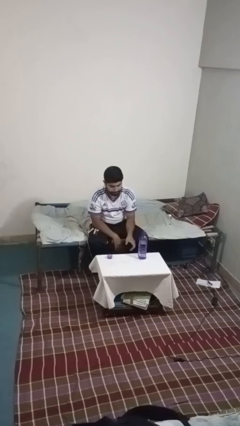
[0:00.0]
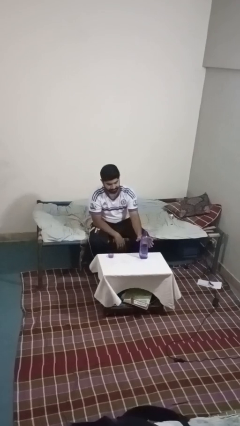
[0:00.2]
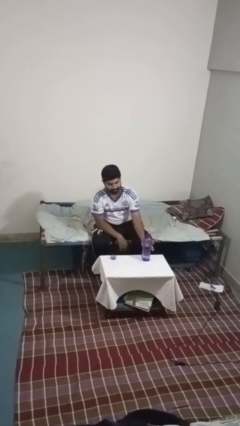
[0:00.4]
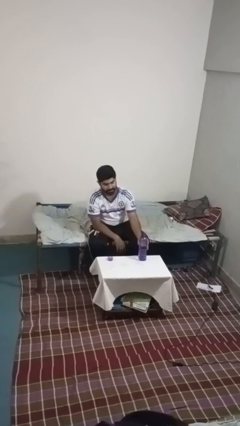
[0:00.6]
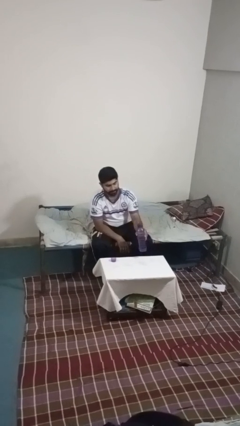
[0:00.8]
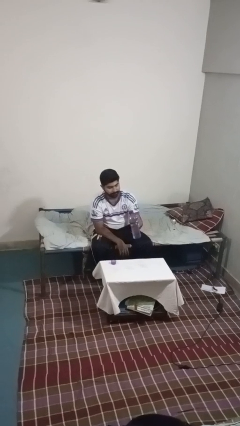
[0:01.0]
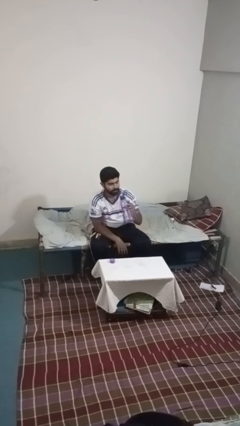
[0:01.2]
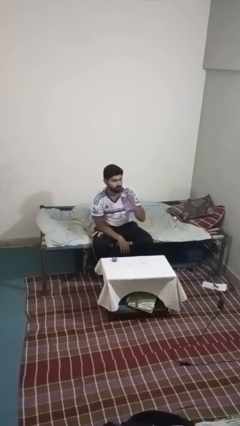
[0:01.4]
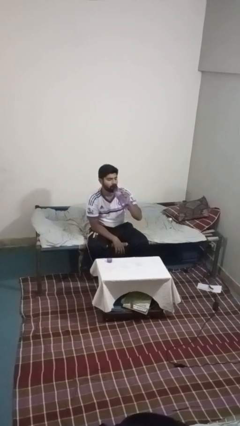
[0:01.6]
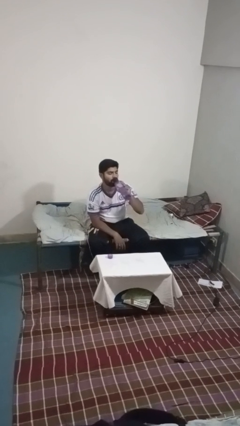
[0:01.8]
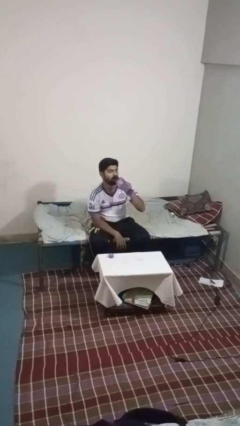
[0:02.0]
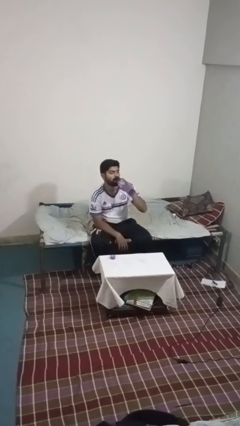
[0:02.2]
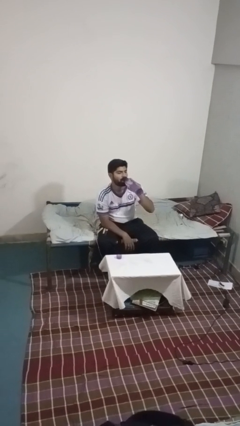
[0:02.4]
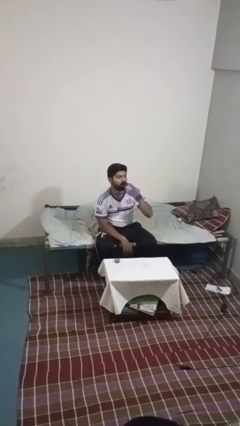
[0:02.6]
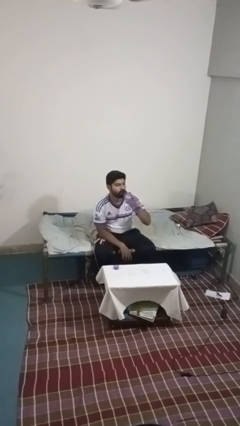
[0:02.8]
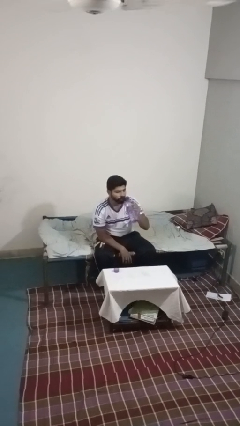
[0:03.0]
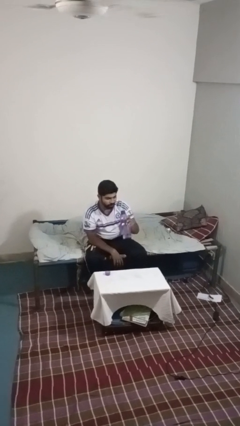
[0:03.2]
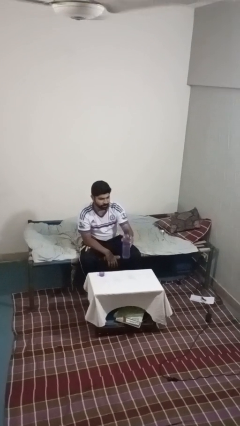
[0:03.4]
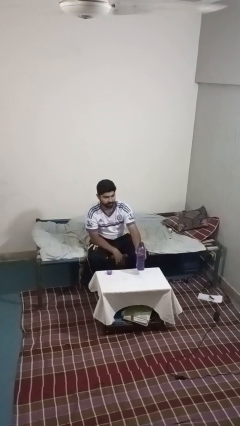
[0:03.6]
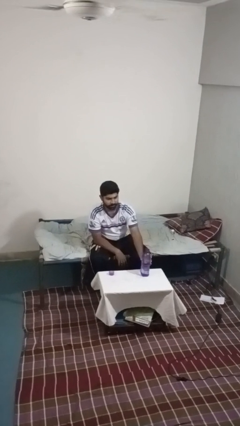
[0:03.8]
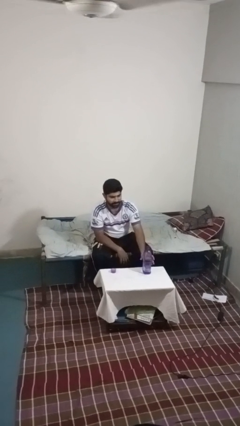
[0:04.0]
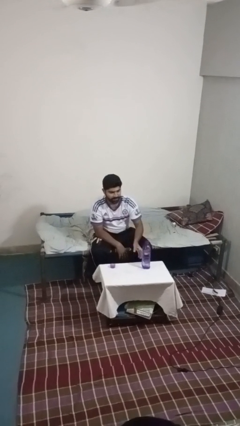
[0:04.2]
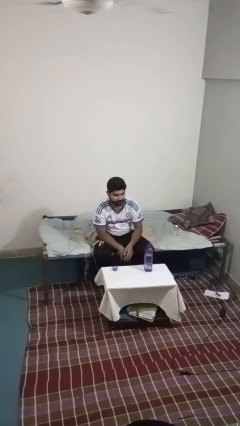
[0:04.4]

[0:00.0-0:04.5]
person drinks from bottle

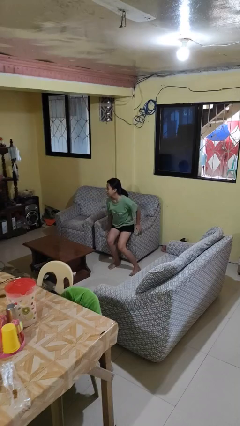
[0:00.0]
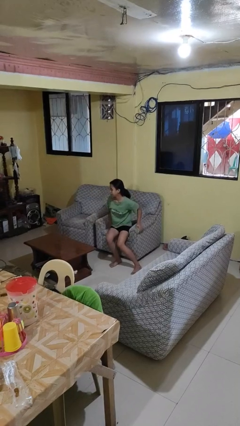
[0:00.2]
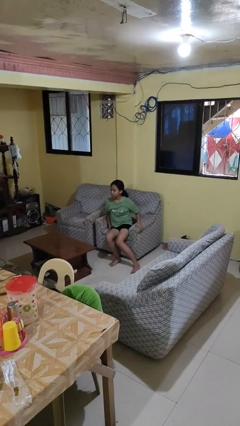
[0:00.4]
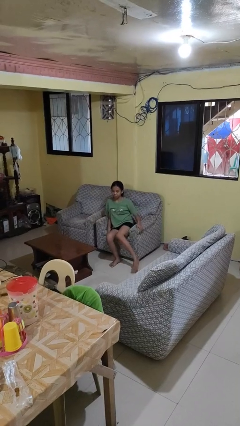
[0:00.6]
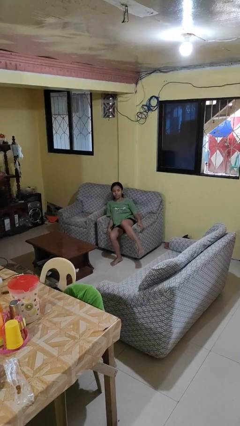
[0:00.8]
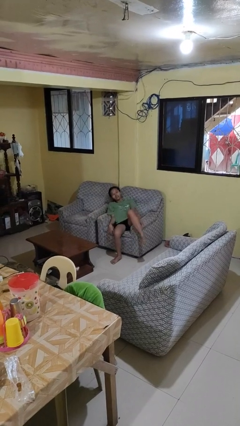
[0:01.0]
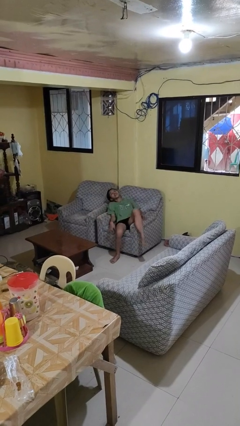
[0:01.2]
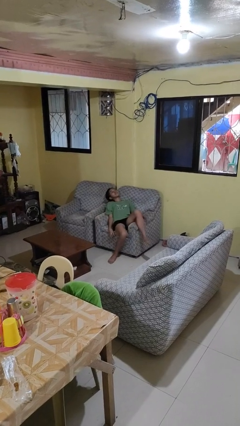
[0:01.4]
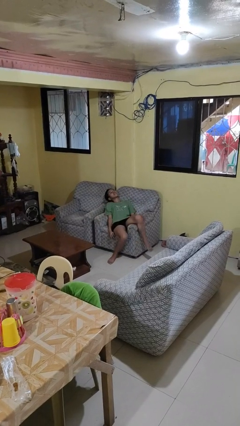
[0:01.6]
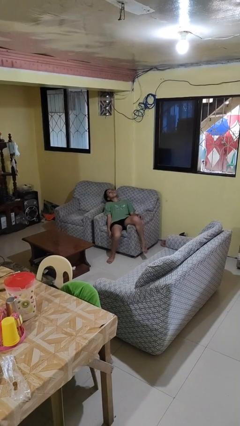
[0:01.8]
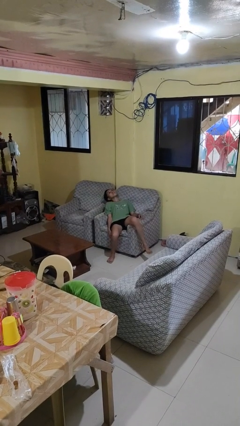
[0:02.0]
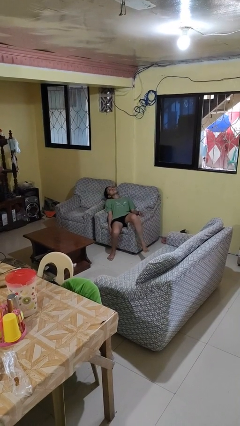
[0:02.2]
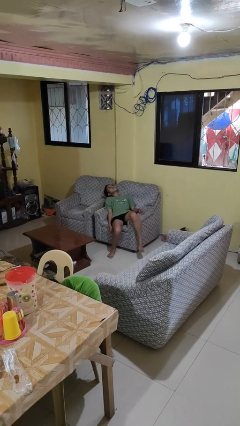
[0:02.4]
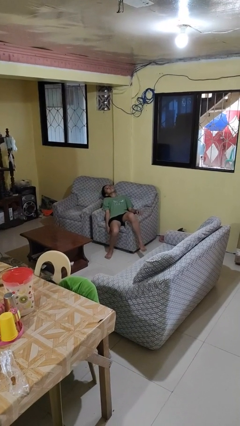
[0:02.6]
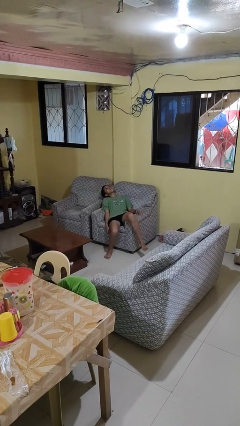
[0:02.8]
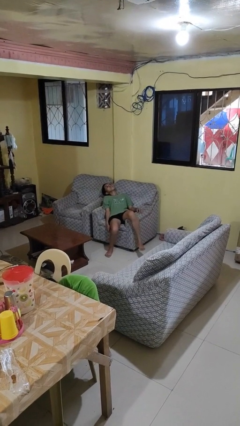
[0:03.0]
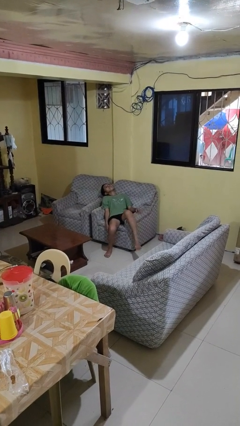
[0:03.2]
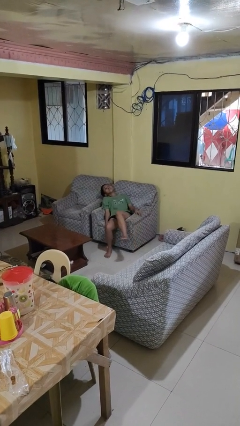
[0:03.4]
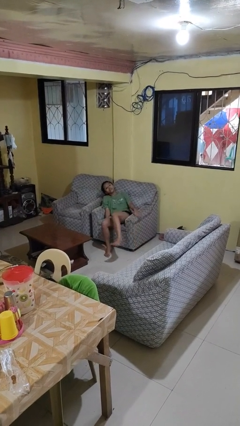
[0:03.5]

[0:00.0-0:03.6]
person lies down on couch

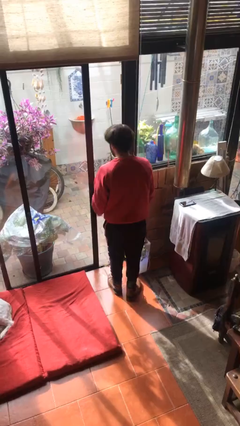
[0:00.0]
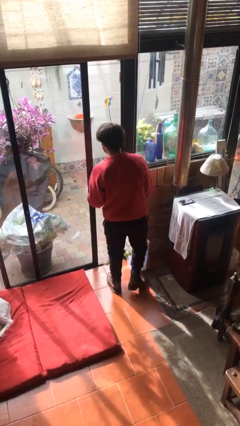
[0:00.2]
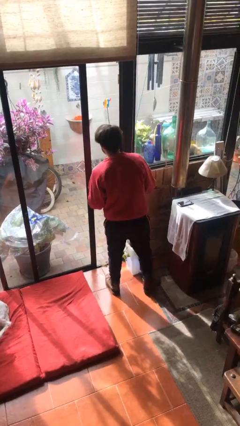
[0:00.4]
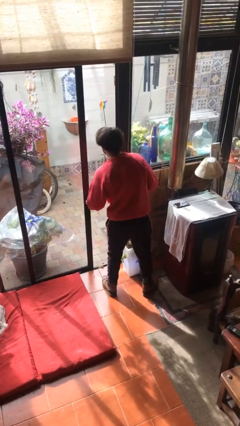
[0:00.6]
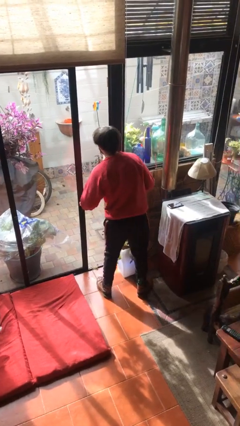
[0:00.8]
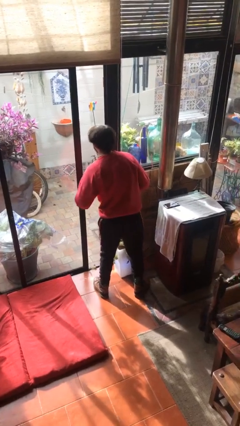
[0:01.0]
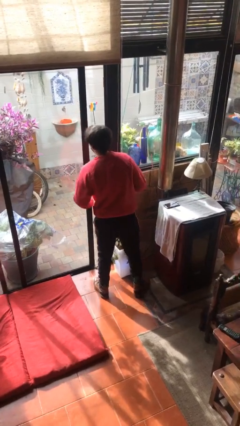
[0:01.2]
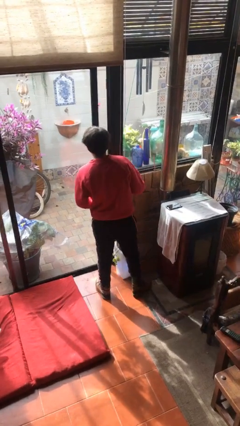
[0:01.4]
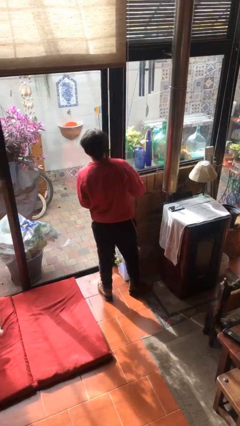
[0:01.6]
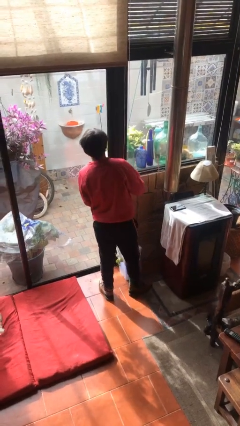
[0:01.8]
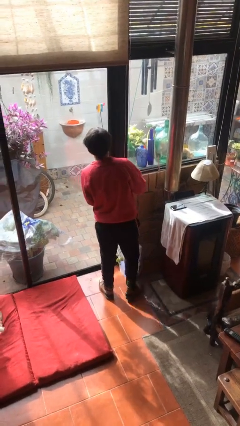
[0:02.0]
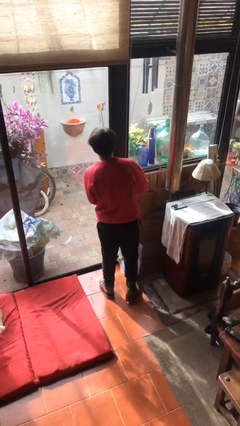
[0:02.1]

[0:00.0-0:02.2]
person closes sliding door

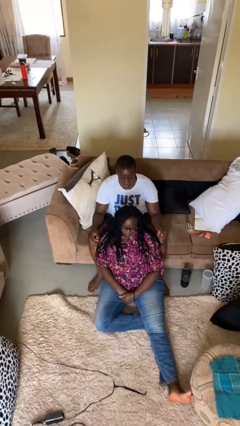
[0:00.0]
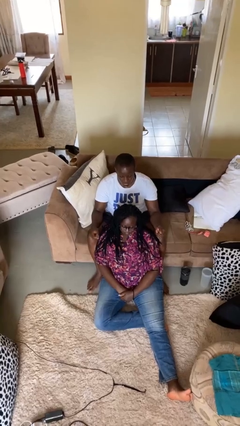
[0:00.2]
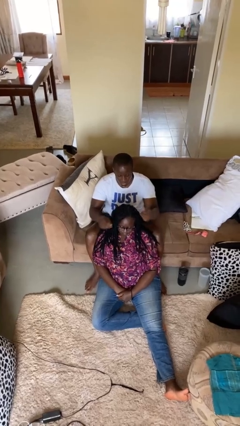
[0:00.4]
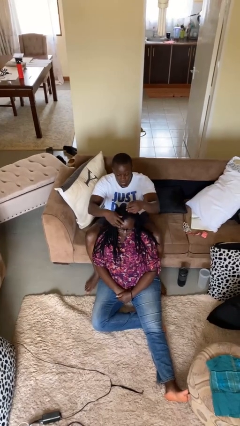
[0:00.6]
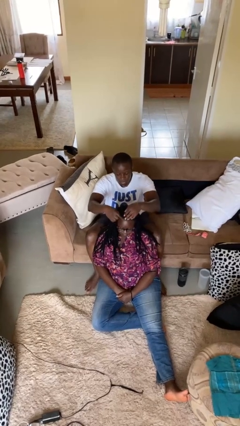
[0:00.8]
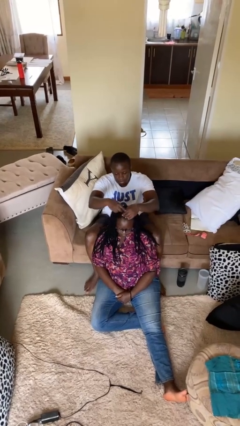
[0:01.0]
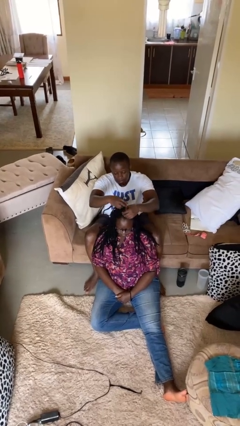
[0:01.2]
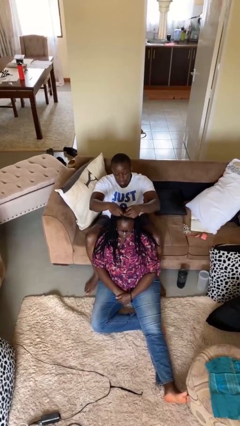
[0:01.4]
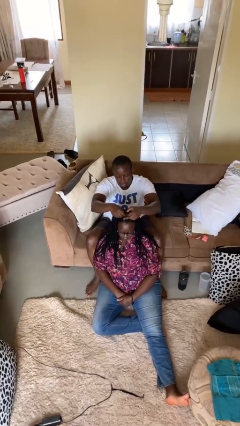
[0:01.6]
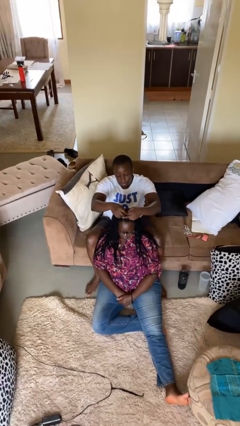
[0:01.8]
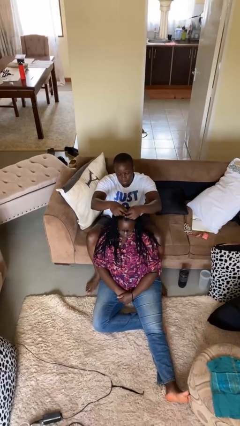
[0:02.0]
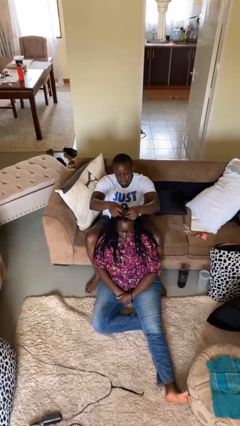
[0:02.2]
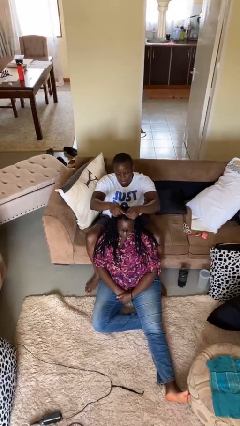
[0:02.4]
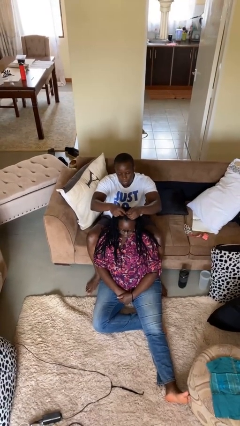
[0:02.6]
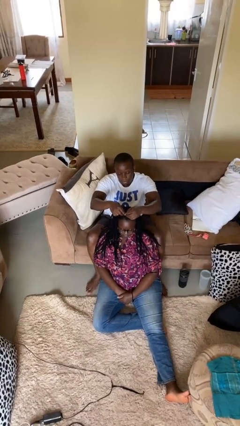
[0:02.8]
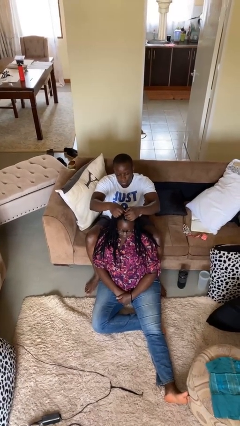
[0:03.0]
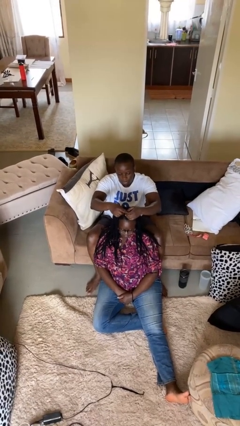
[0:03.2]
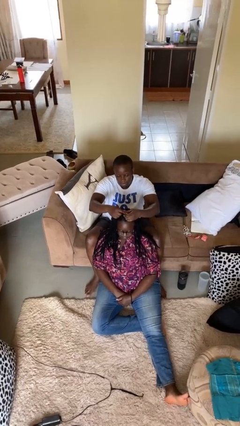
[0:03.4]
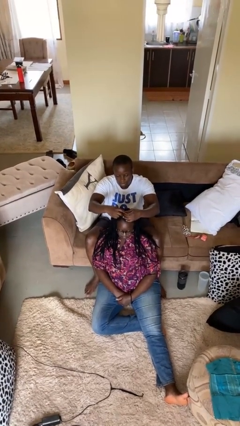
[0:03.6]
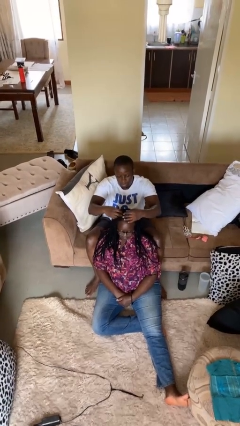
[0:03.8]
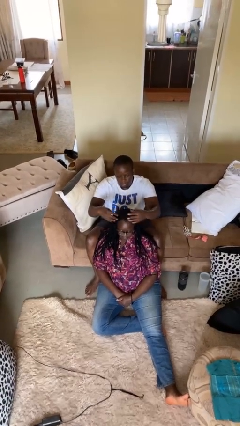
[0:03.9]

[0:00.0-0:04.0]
person braids hair of person

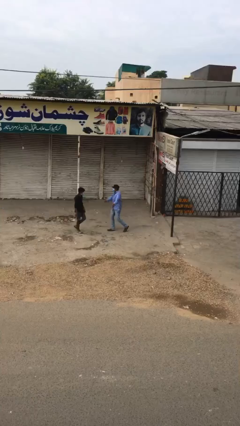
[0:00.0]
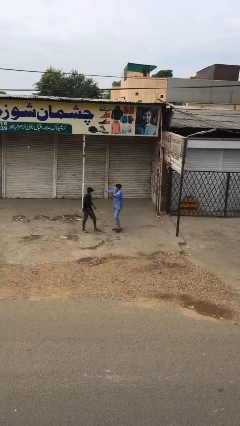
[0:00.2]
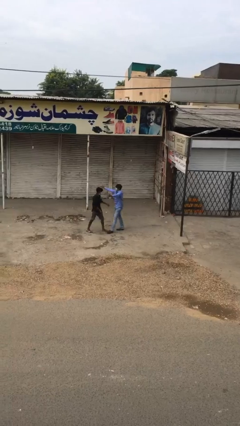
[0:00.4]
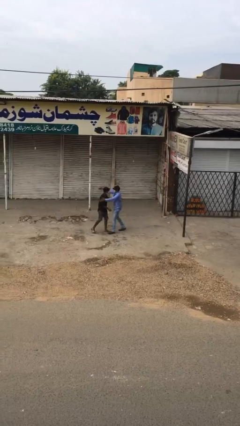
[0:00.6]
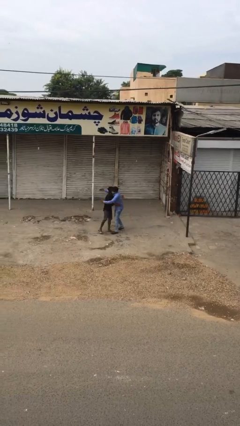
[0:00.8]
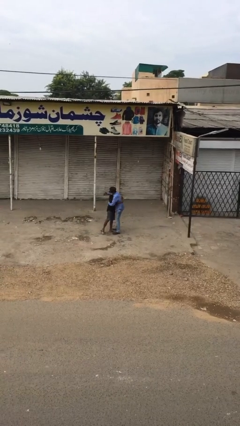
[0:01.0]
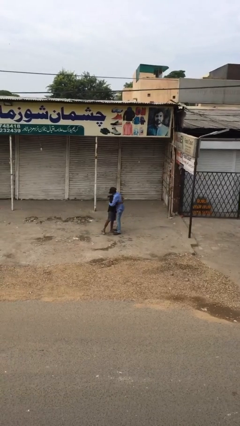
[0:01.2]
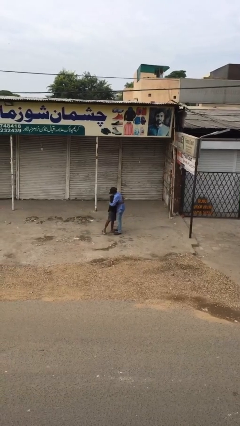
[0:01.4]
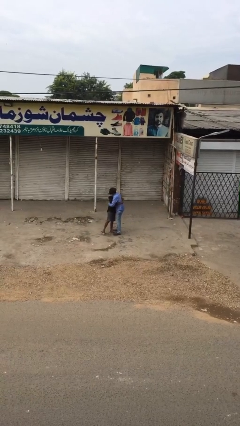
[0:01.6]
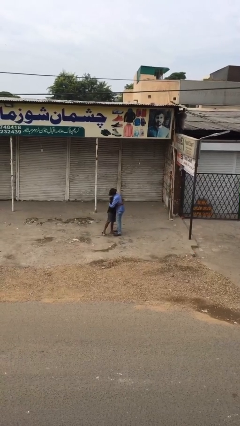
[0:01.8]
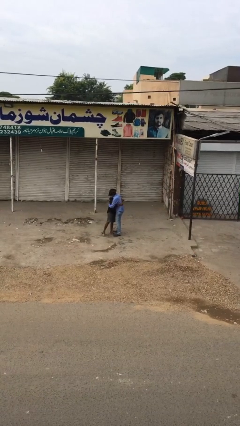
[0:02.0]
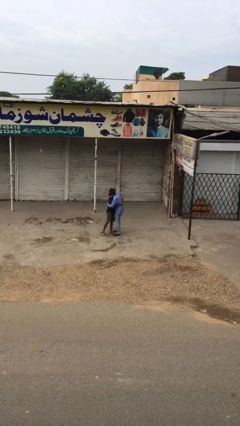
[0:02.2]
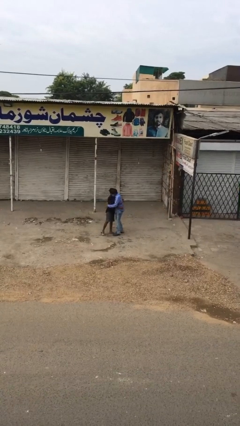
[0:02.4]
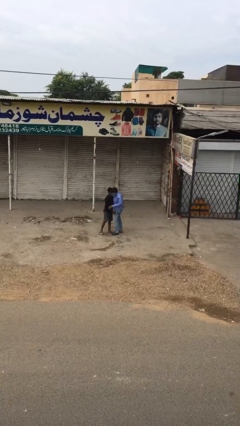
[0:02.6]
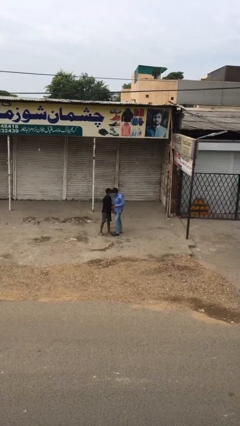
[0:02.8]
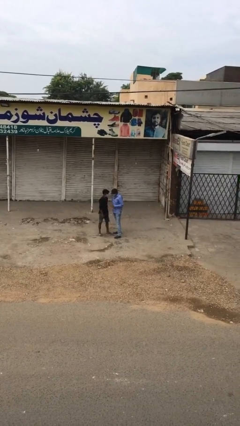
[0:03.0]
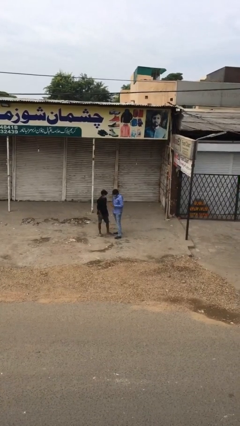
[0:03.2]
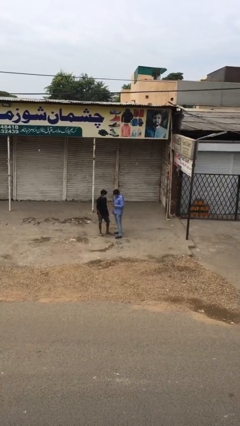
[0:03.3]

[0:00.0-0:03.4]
person embraces person
